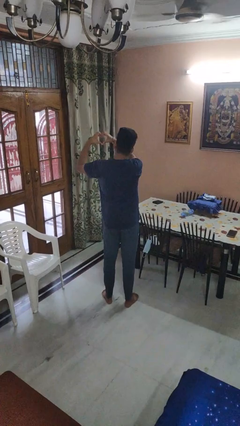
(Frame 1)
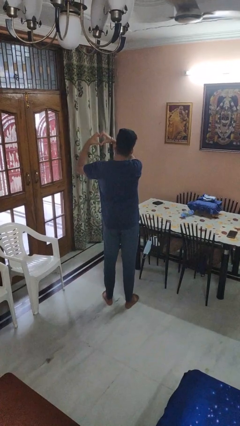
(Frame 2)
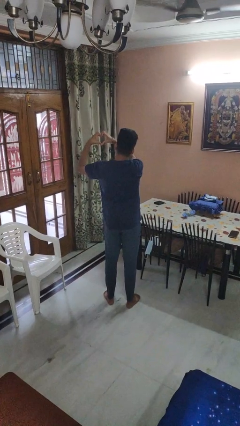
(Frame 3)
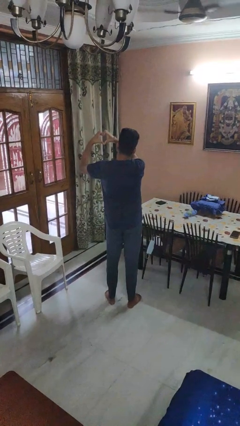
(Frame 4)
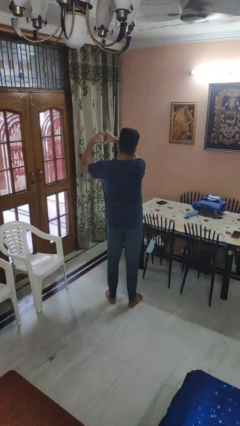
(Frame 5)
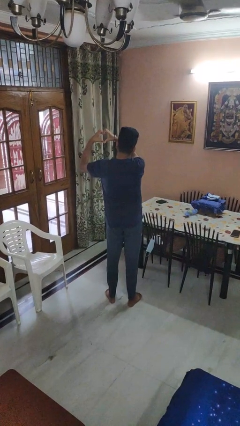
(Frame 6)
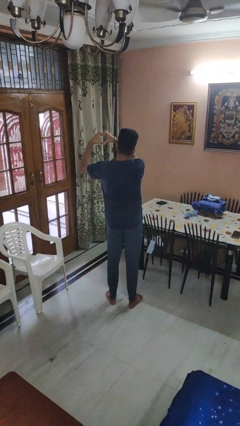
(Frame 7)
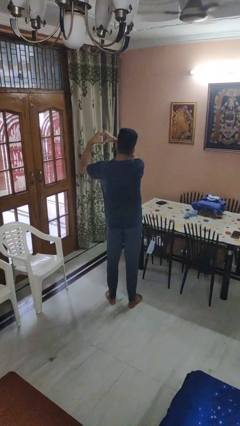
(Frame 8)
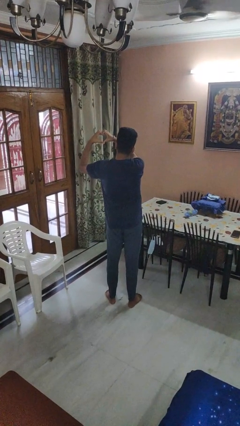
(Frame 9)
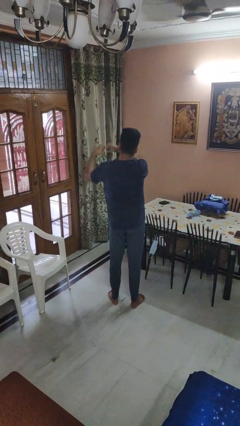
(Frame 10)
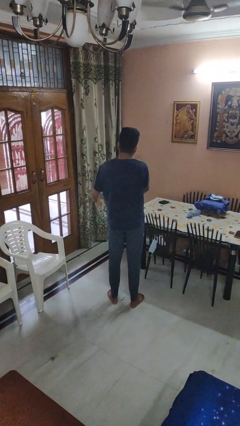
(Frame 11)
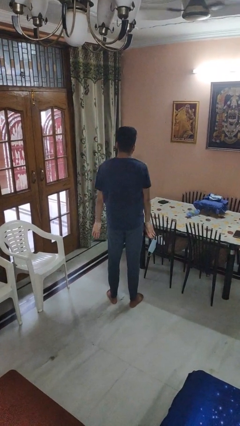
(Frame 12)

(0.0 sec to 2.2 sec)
person gestures heart

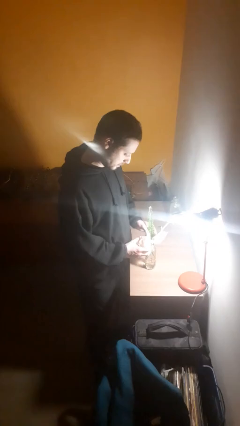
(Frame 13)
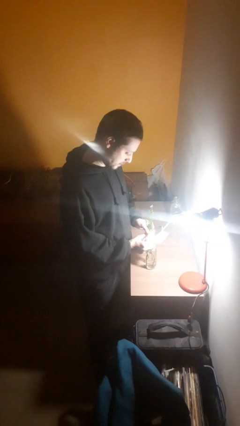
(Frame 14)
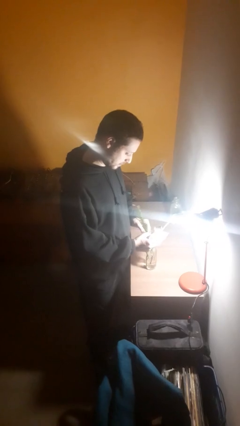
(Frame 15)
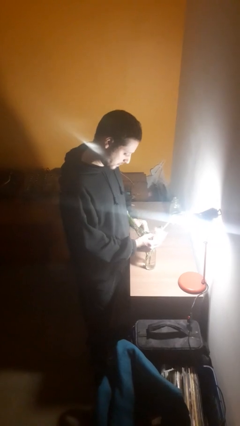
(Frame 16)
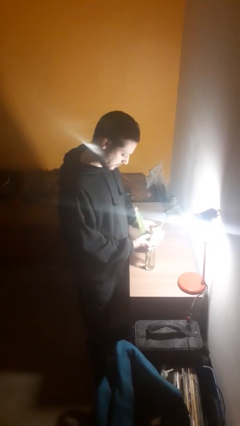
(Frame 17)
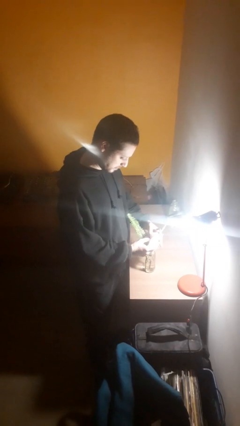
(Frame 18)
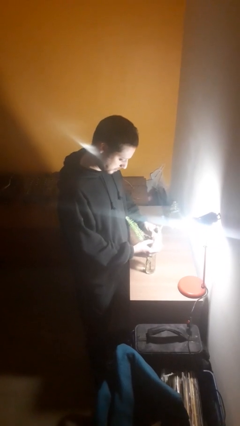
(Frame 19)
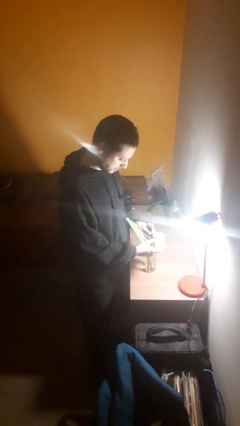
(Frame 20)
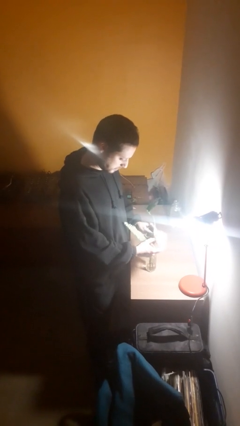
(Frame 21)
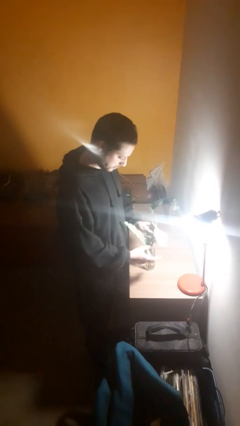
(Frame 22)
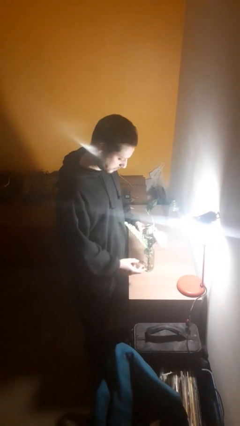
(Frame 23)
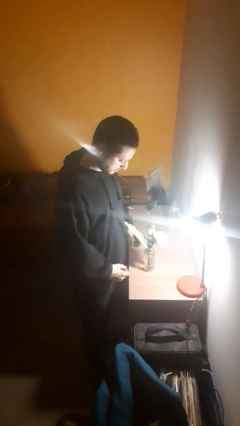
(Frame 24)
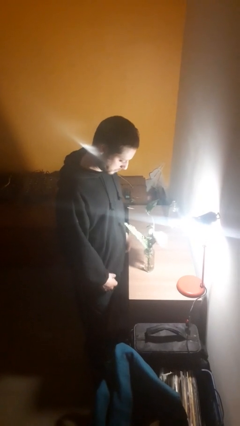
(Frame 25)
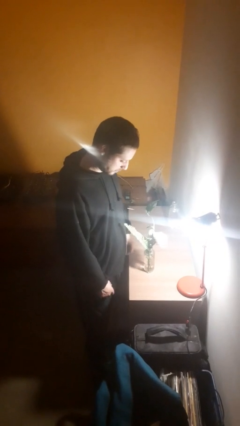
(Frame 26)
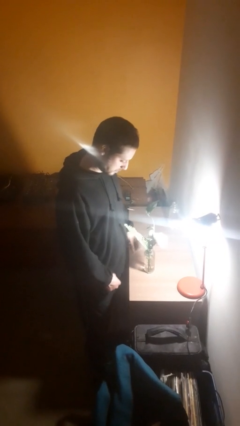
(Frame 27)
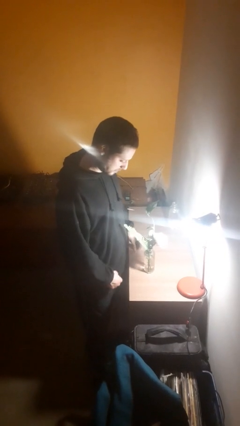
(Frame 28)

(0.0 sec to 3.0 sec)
person arranges flowers in vase

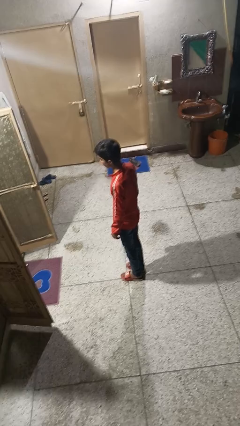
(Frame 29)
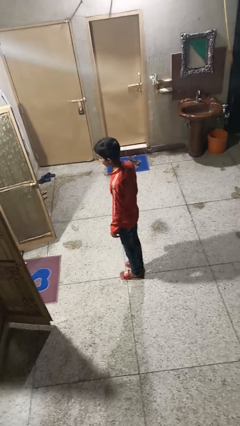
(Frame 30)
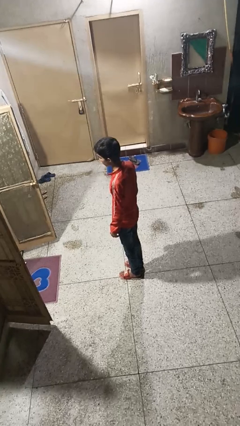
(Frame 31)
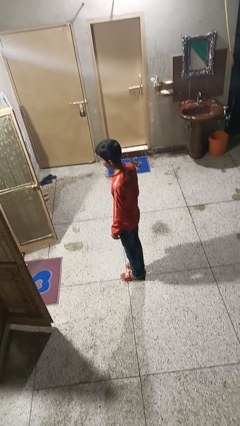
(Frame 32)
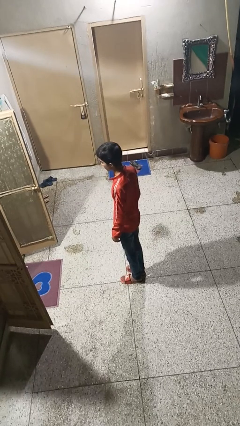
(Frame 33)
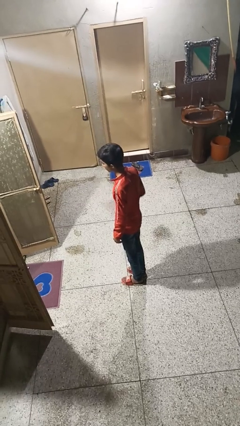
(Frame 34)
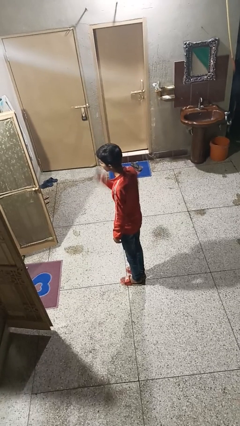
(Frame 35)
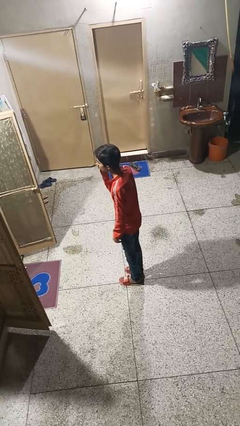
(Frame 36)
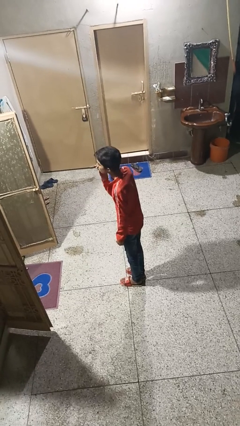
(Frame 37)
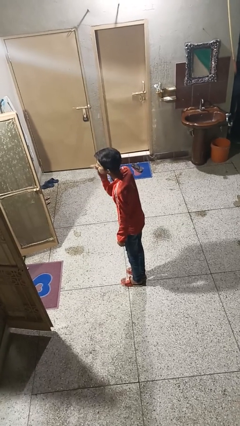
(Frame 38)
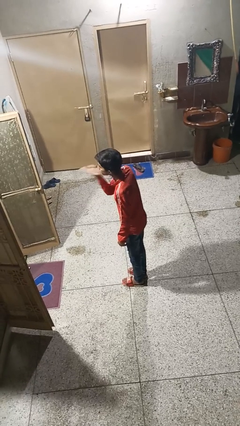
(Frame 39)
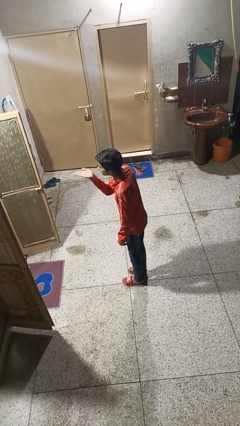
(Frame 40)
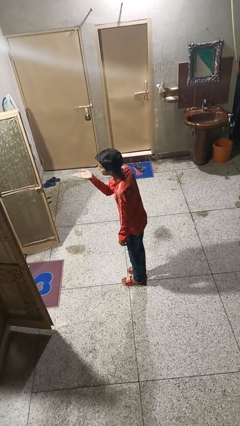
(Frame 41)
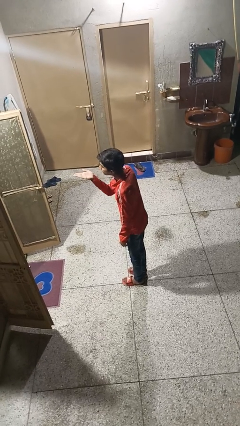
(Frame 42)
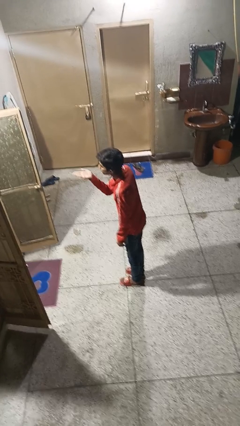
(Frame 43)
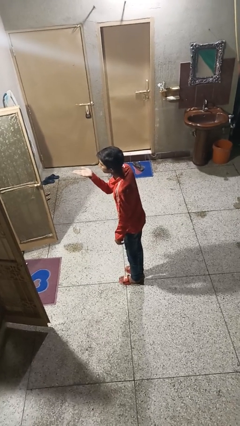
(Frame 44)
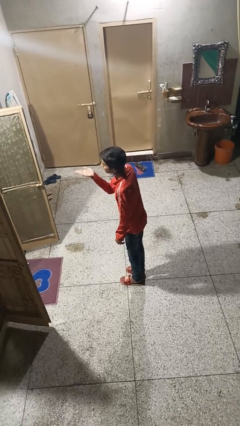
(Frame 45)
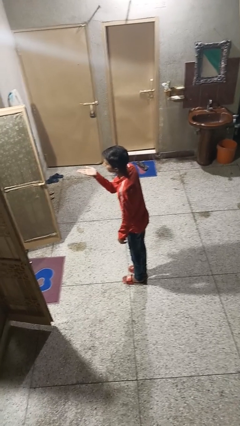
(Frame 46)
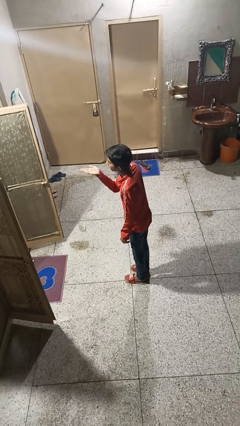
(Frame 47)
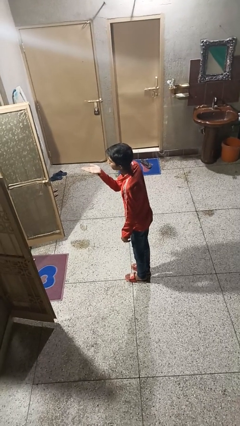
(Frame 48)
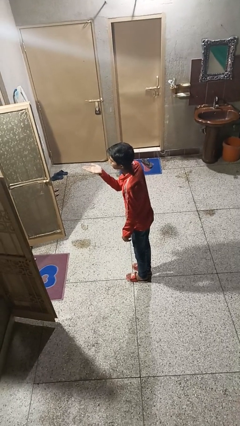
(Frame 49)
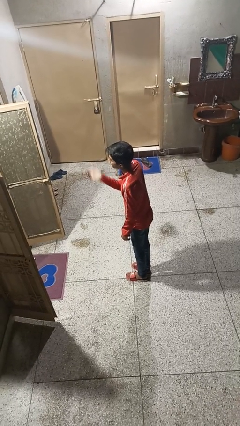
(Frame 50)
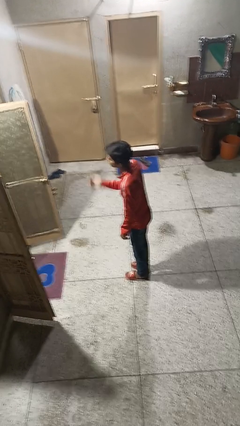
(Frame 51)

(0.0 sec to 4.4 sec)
person gestures blow kiss

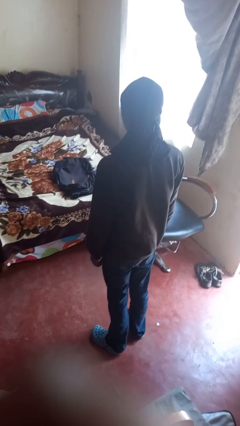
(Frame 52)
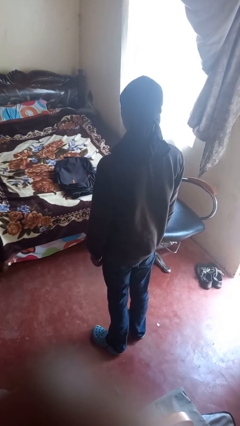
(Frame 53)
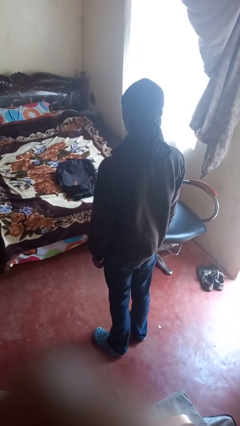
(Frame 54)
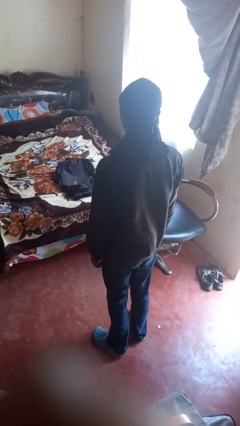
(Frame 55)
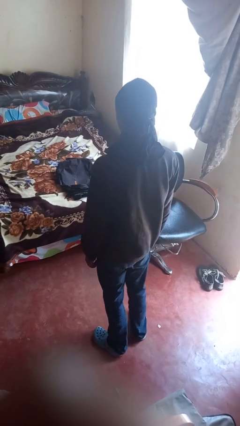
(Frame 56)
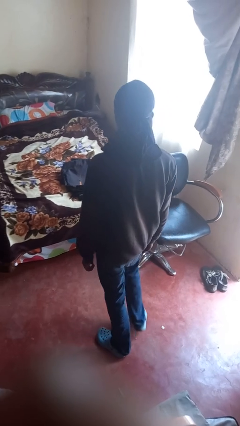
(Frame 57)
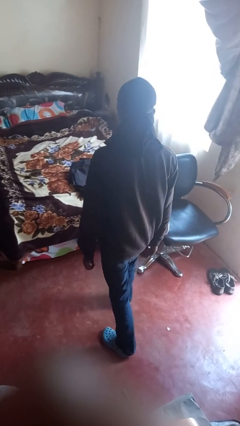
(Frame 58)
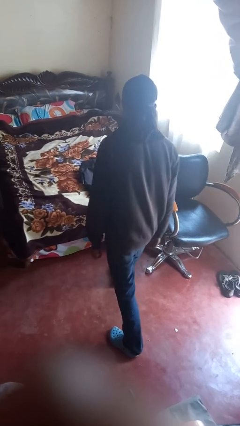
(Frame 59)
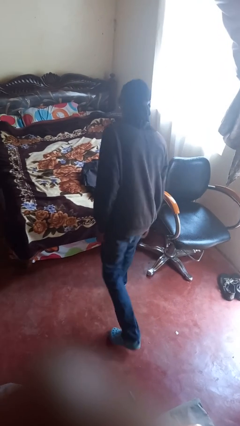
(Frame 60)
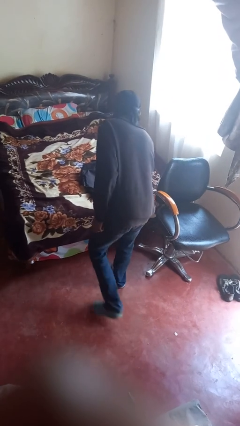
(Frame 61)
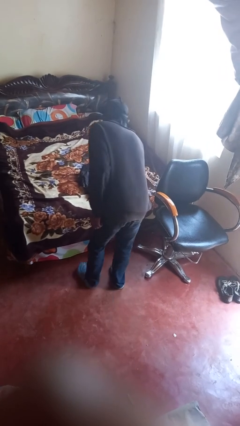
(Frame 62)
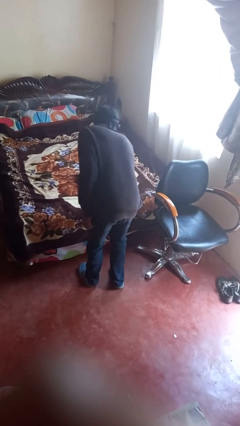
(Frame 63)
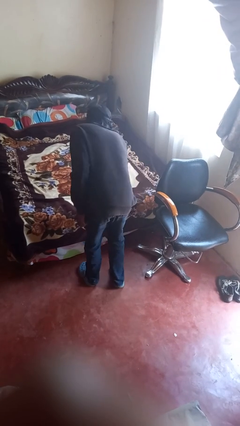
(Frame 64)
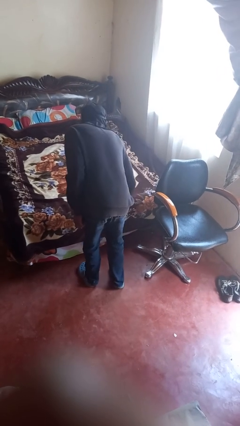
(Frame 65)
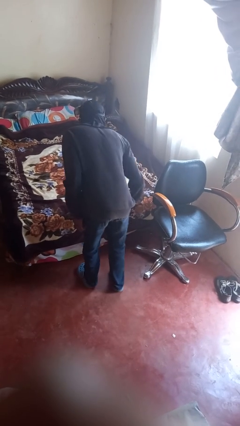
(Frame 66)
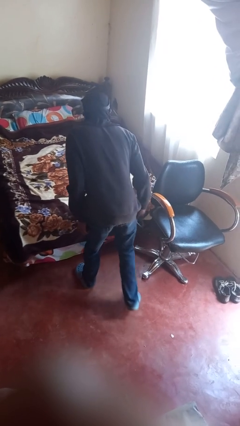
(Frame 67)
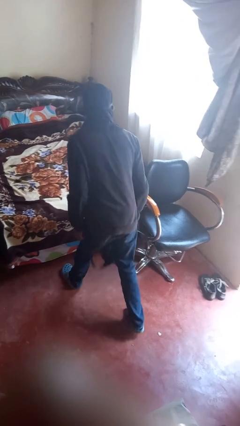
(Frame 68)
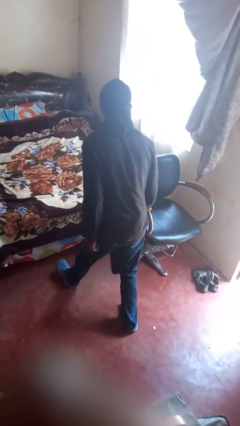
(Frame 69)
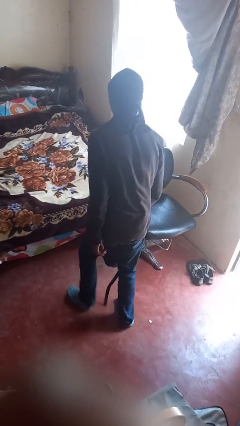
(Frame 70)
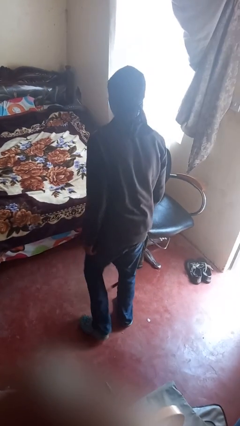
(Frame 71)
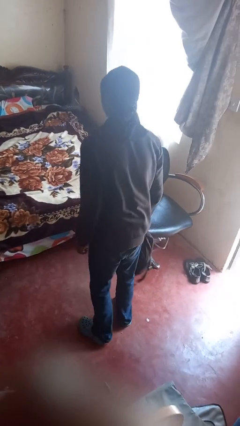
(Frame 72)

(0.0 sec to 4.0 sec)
person picks up object from bed

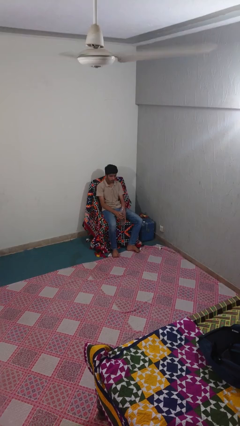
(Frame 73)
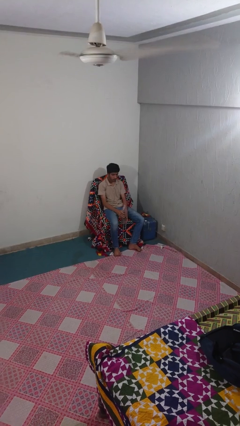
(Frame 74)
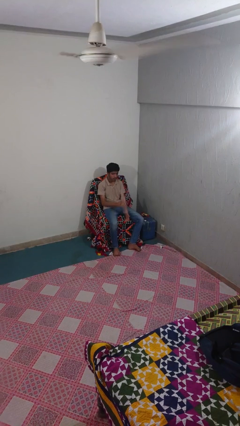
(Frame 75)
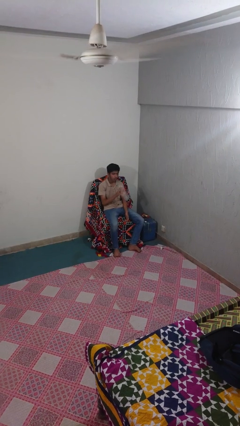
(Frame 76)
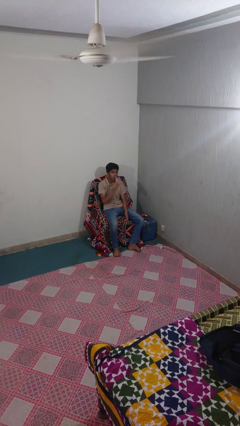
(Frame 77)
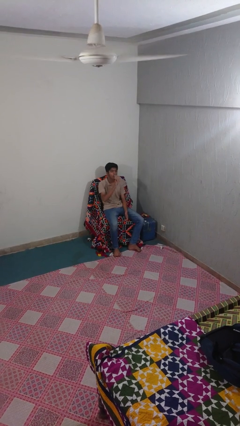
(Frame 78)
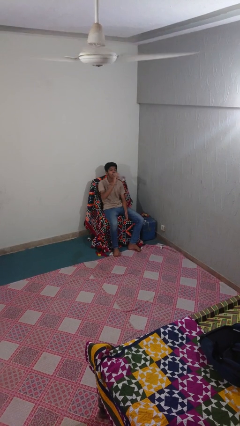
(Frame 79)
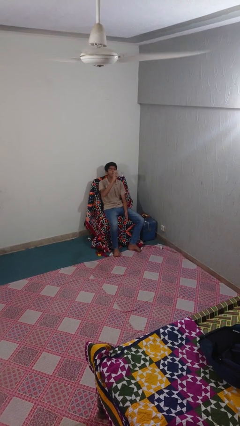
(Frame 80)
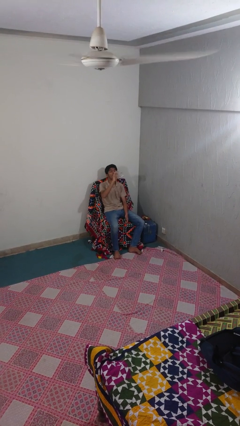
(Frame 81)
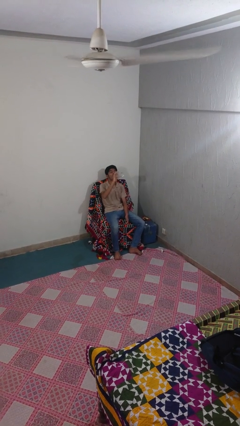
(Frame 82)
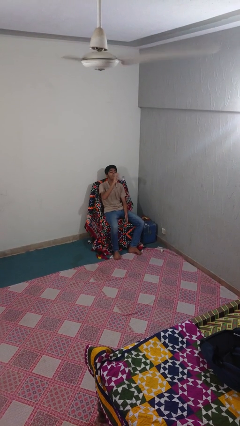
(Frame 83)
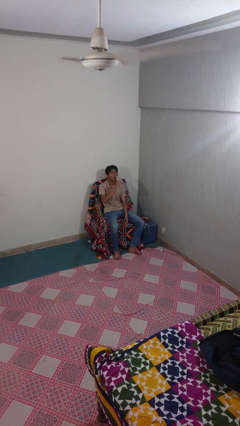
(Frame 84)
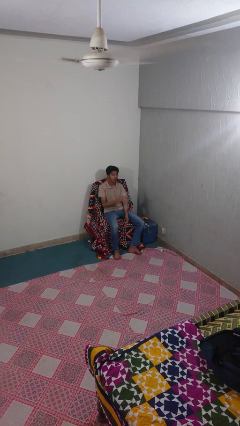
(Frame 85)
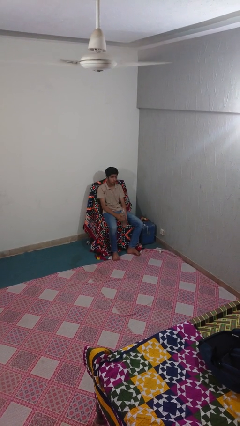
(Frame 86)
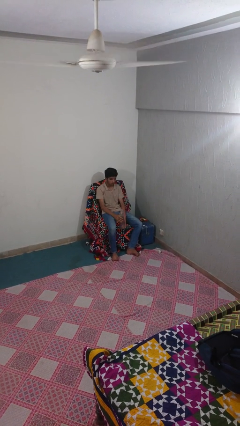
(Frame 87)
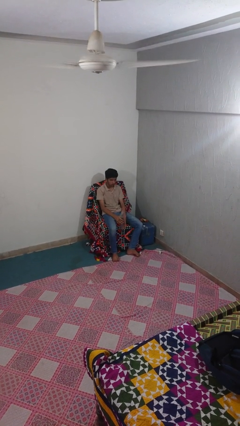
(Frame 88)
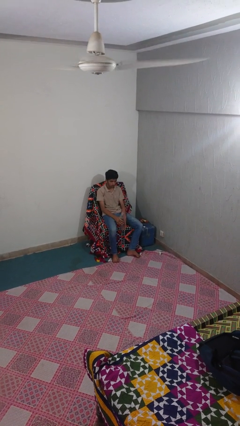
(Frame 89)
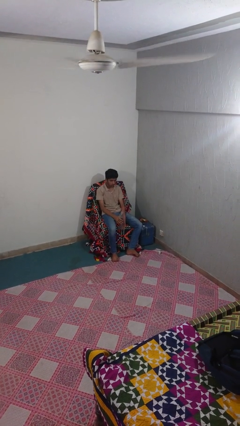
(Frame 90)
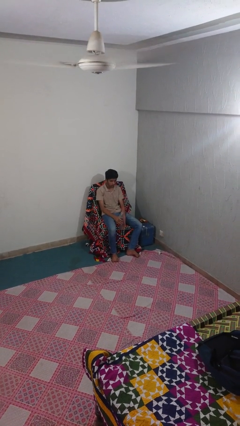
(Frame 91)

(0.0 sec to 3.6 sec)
person drinks from bottle
